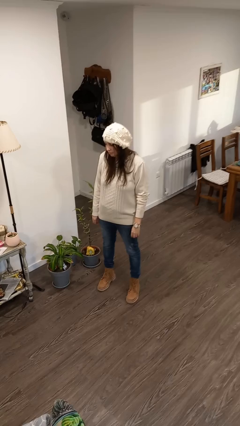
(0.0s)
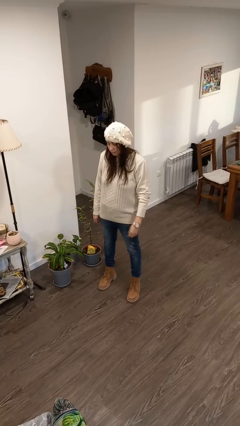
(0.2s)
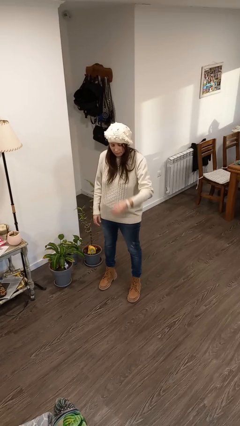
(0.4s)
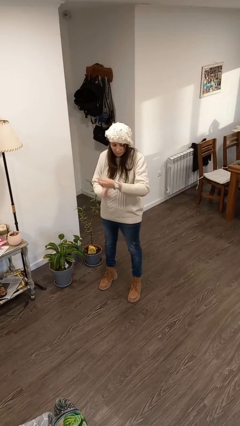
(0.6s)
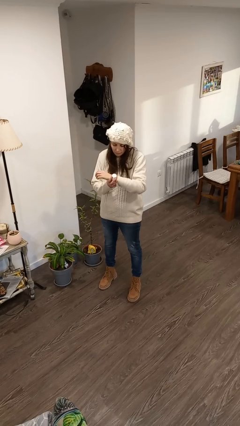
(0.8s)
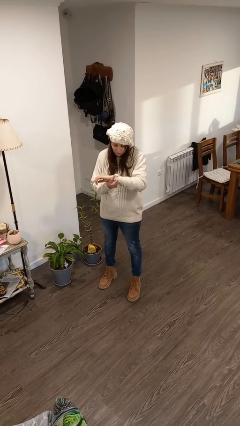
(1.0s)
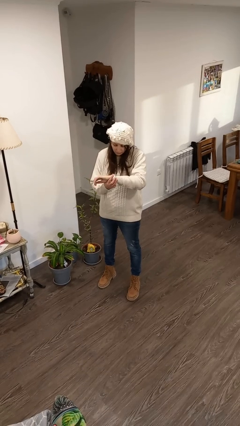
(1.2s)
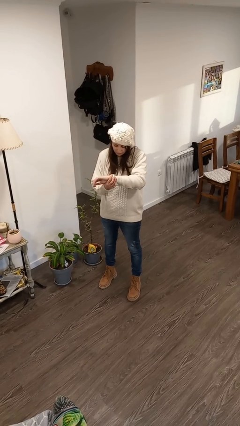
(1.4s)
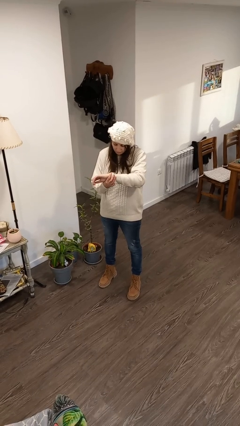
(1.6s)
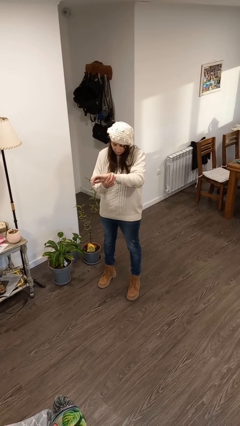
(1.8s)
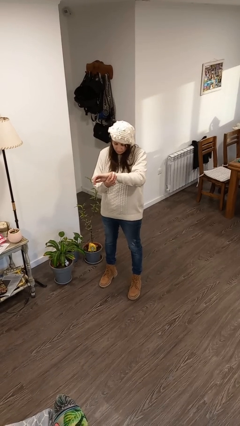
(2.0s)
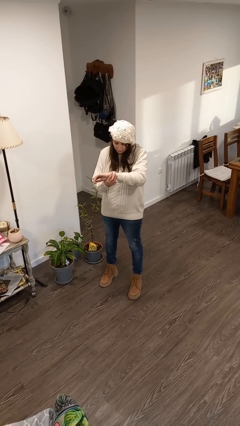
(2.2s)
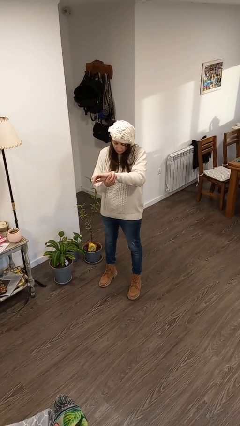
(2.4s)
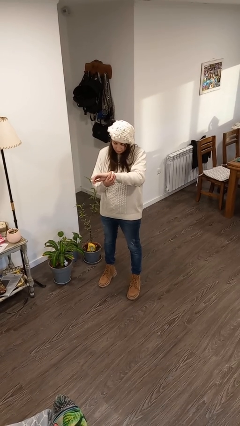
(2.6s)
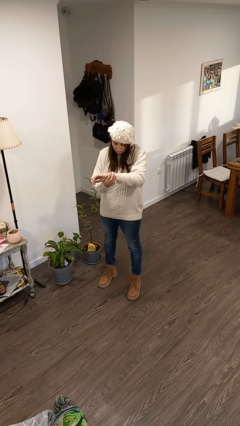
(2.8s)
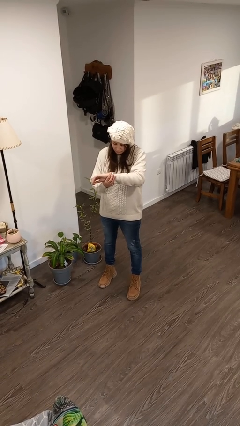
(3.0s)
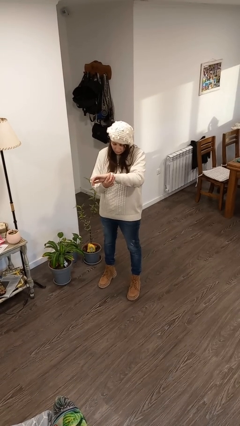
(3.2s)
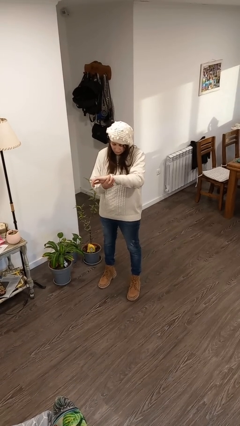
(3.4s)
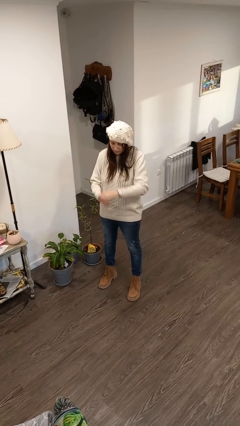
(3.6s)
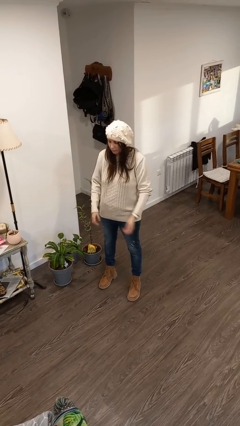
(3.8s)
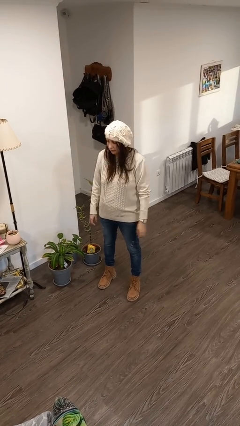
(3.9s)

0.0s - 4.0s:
person looks at wristwatch

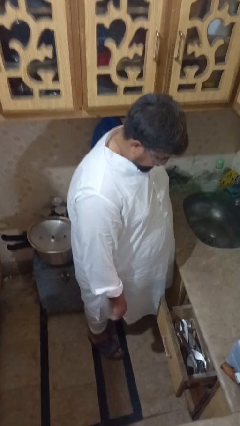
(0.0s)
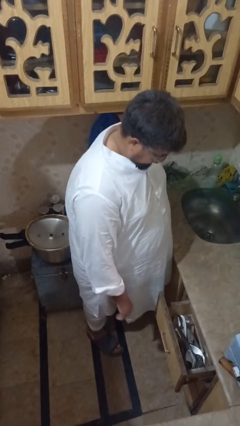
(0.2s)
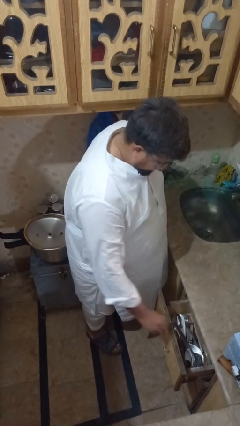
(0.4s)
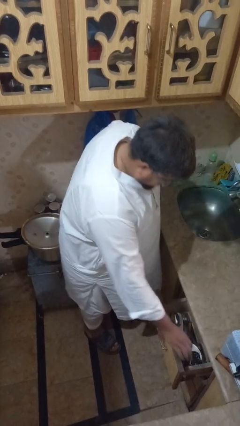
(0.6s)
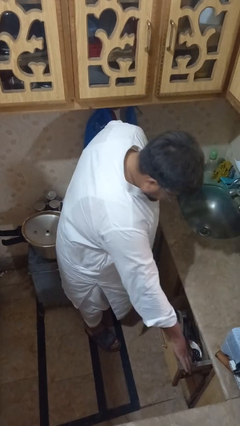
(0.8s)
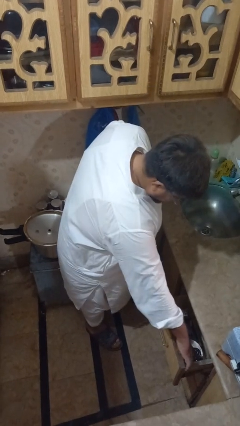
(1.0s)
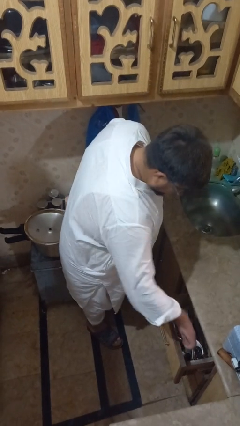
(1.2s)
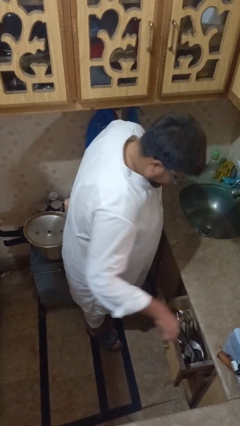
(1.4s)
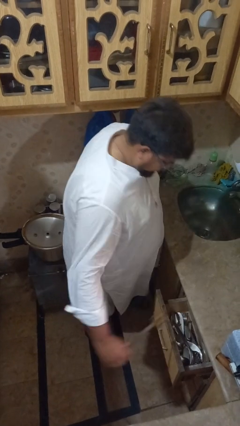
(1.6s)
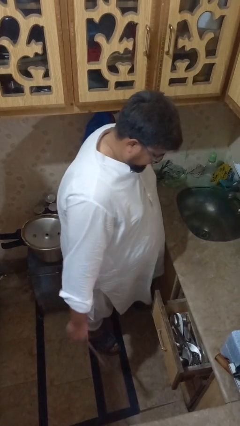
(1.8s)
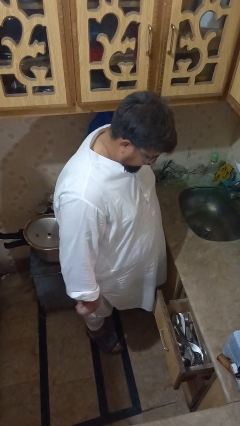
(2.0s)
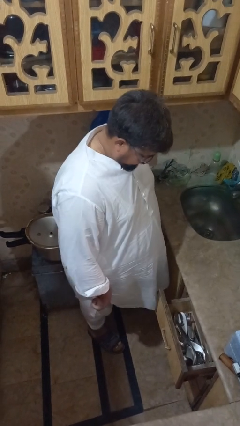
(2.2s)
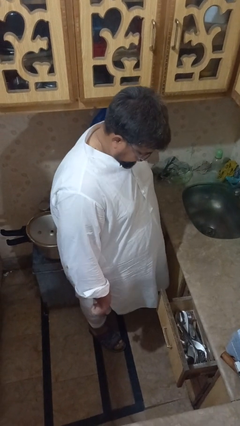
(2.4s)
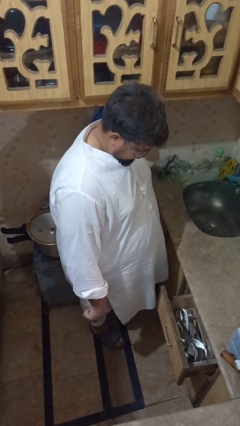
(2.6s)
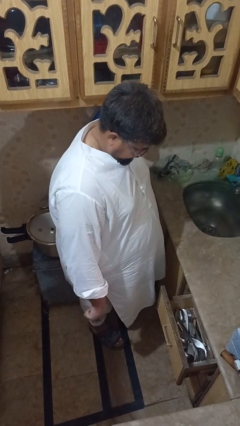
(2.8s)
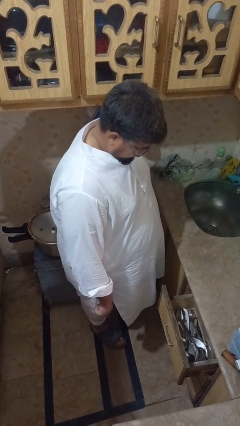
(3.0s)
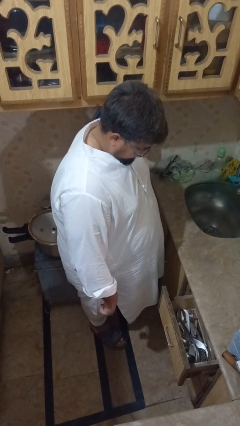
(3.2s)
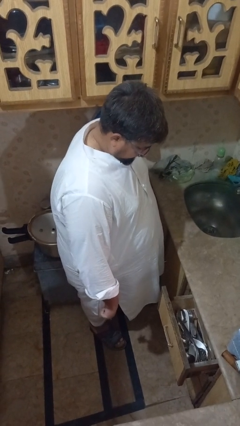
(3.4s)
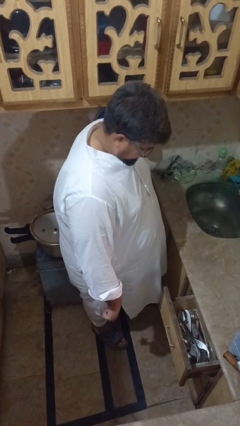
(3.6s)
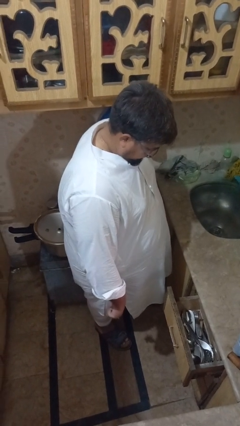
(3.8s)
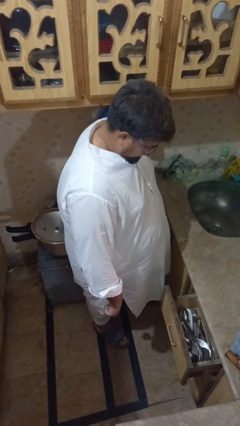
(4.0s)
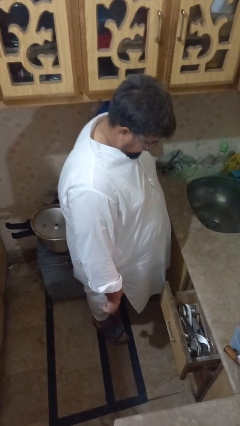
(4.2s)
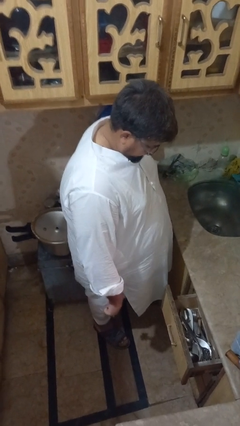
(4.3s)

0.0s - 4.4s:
person takes object from kitchen drawer

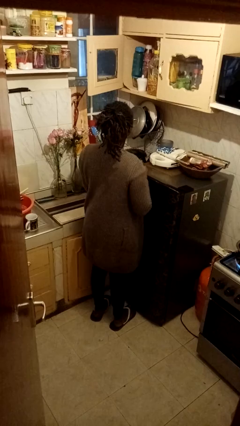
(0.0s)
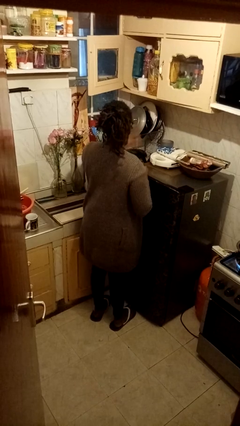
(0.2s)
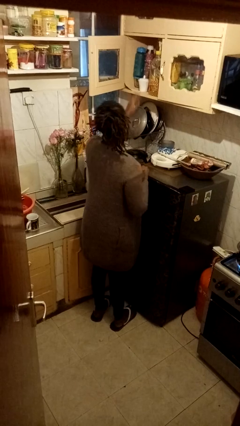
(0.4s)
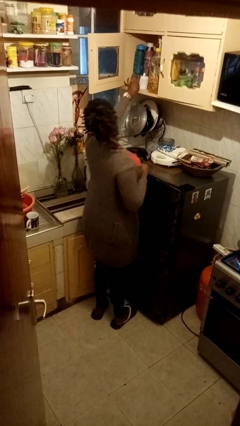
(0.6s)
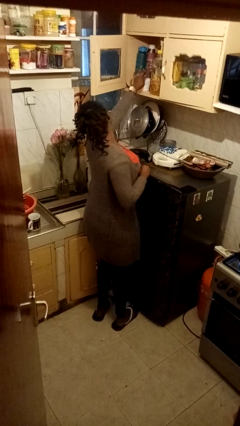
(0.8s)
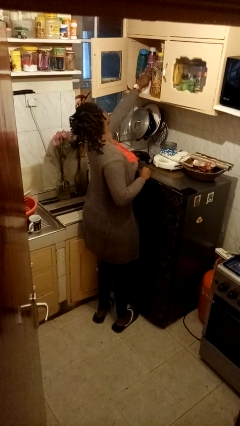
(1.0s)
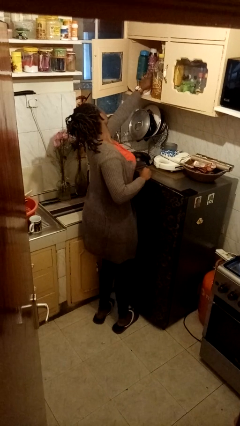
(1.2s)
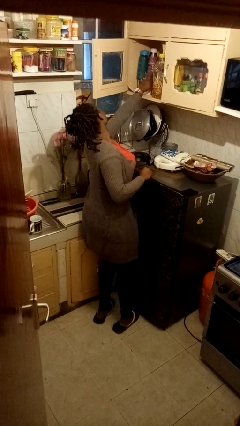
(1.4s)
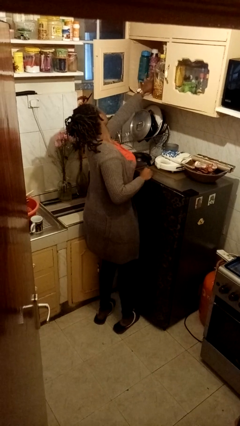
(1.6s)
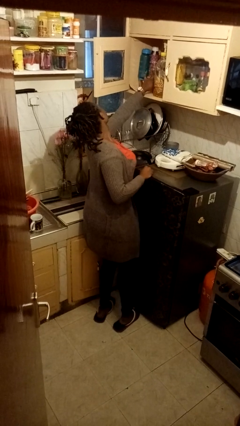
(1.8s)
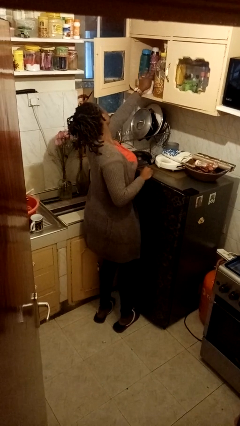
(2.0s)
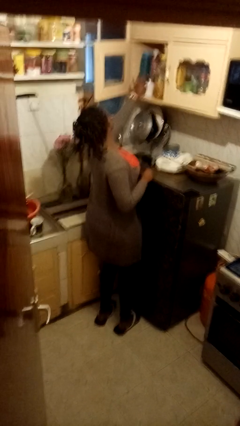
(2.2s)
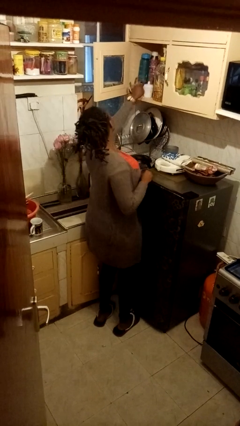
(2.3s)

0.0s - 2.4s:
person searches in cabinet

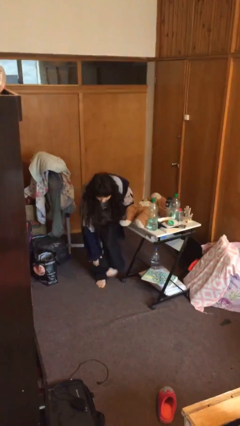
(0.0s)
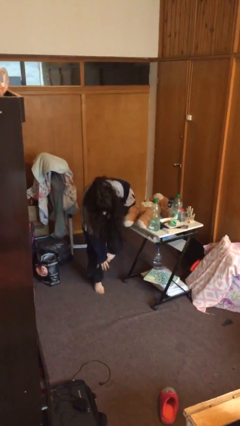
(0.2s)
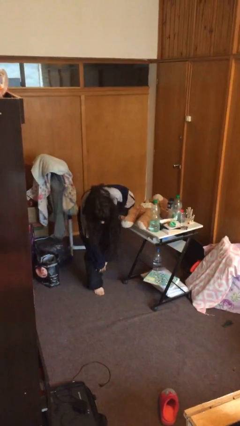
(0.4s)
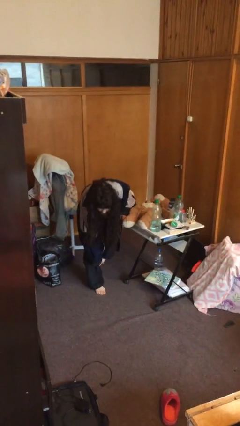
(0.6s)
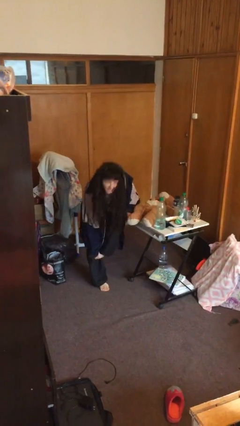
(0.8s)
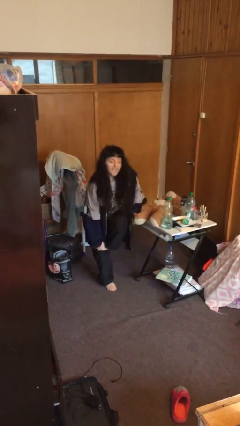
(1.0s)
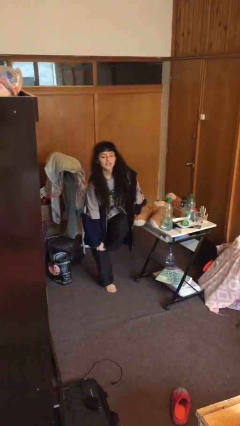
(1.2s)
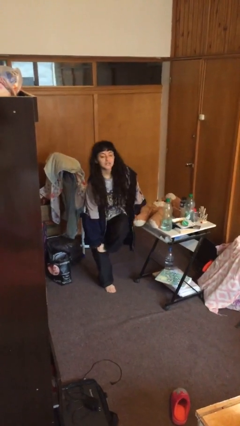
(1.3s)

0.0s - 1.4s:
person stubs toe

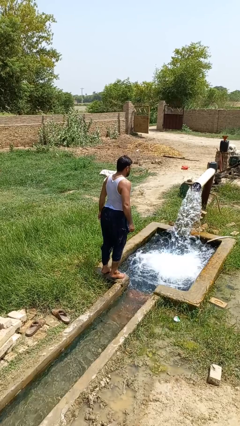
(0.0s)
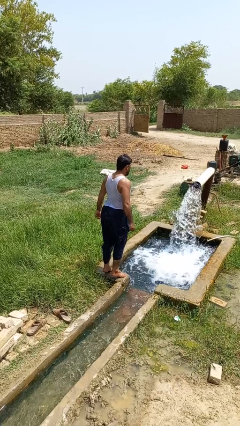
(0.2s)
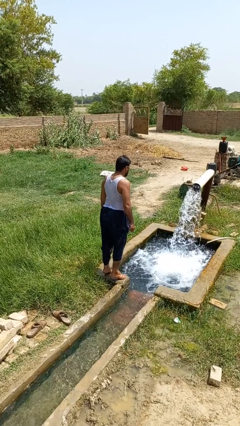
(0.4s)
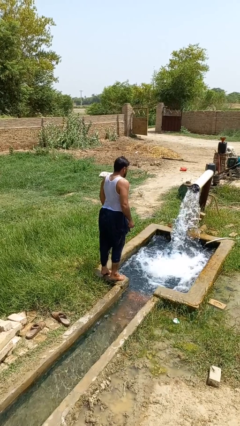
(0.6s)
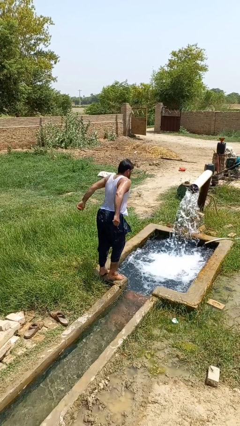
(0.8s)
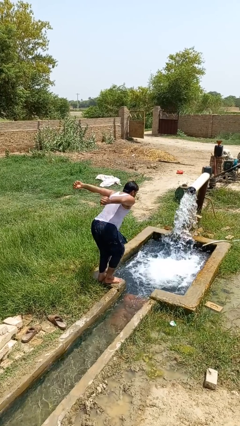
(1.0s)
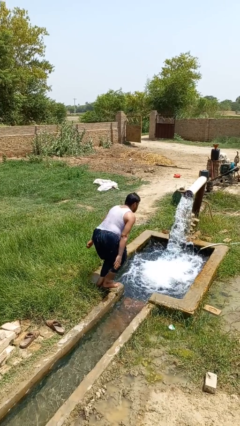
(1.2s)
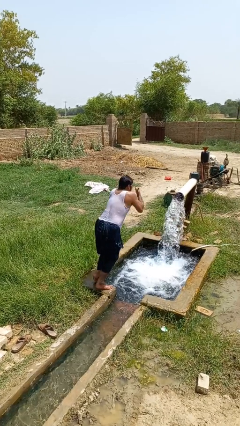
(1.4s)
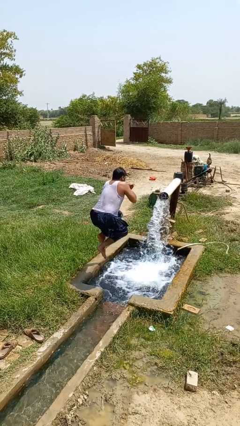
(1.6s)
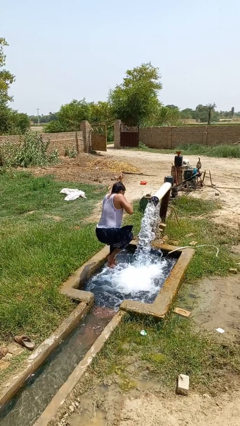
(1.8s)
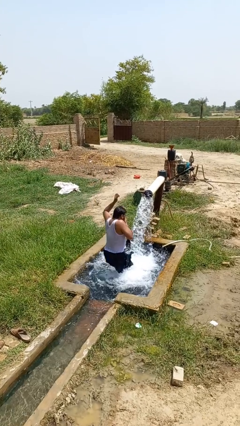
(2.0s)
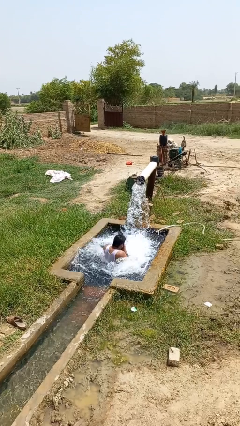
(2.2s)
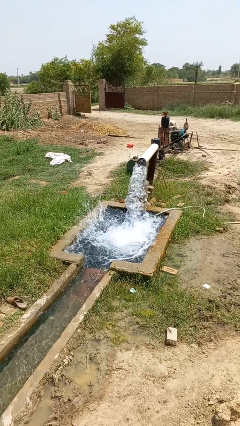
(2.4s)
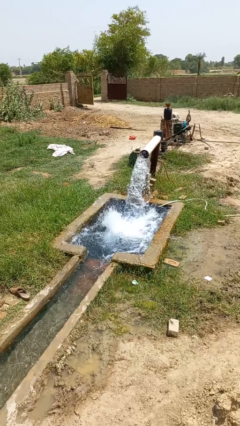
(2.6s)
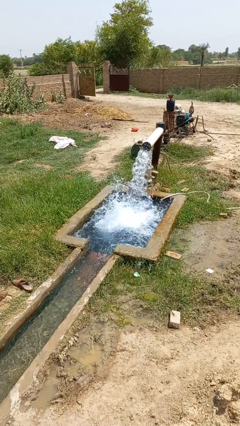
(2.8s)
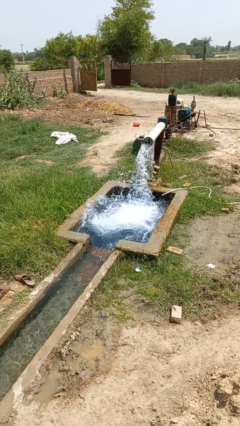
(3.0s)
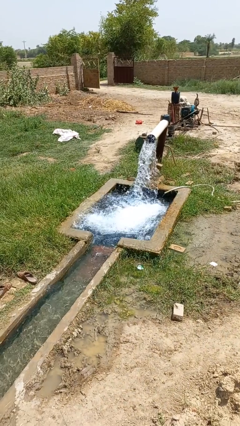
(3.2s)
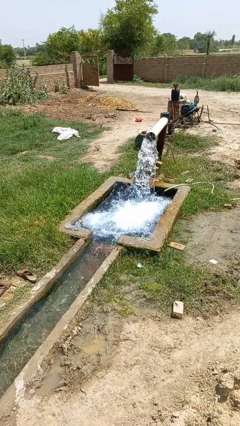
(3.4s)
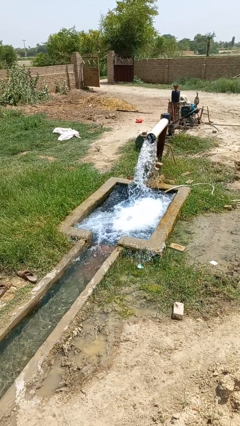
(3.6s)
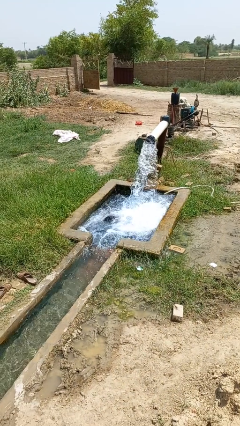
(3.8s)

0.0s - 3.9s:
person jumps into pool

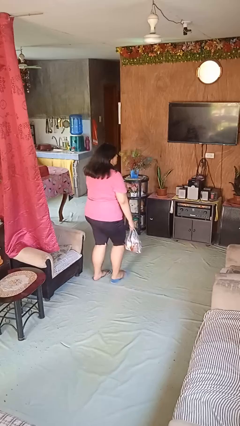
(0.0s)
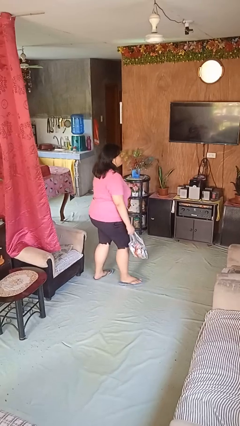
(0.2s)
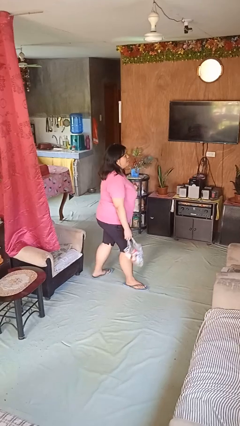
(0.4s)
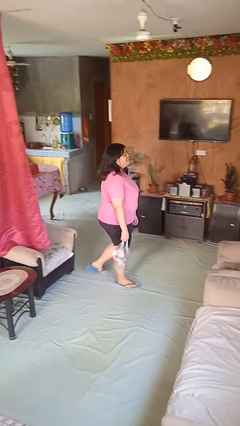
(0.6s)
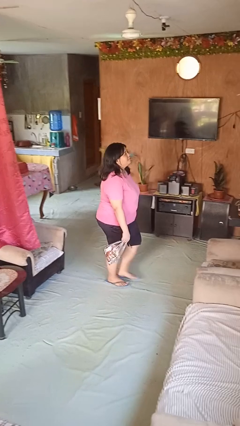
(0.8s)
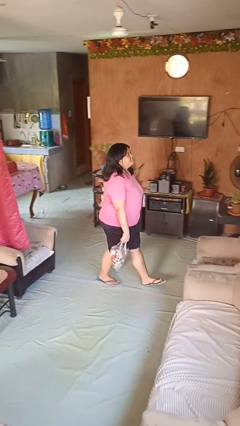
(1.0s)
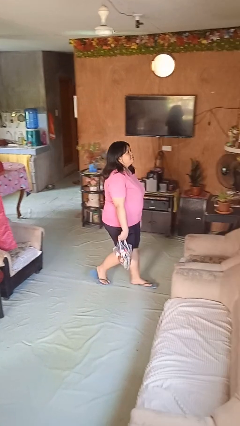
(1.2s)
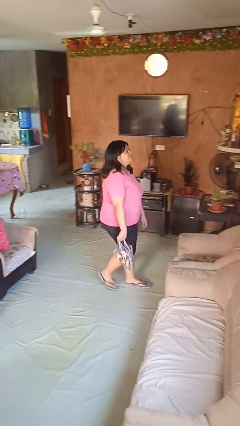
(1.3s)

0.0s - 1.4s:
person carries groceries
